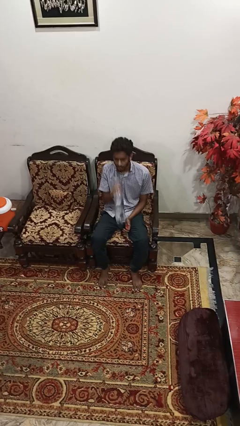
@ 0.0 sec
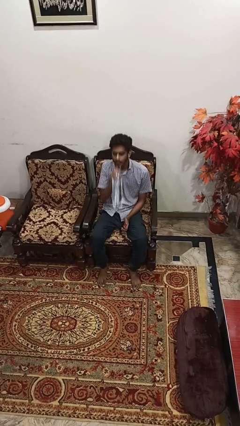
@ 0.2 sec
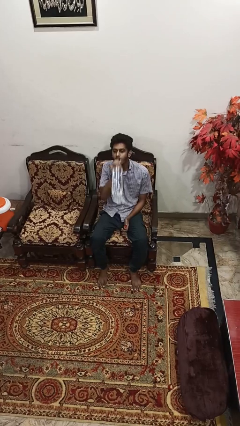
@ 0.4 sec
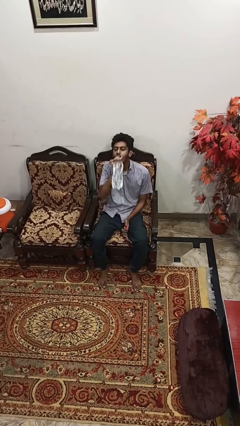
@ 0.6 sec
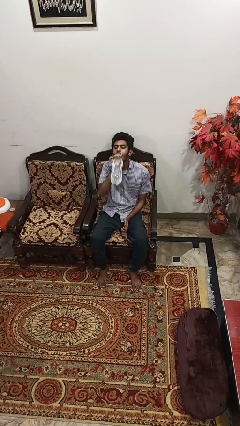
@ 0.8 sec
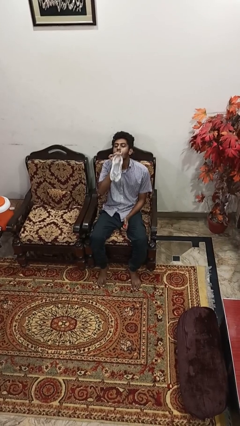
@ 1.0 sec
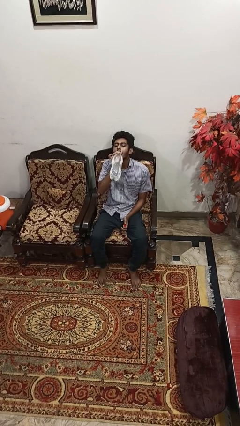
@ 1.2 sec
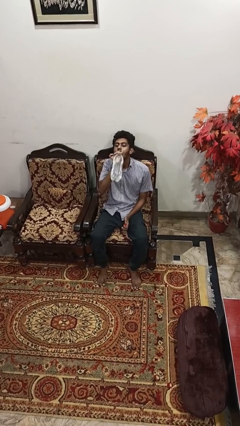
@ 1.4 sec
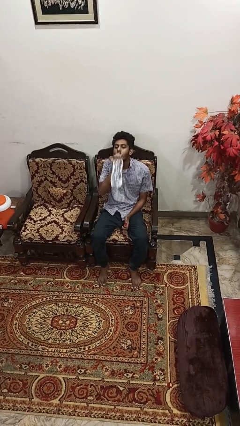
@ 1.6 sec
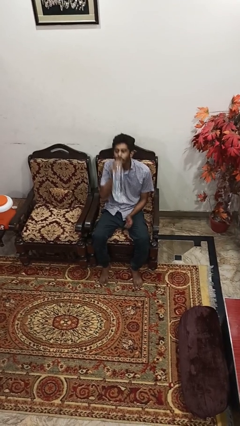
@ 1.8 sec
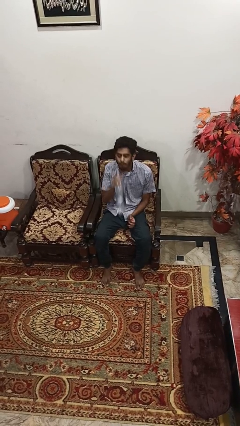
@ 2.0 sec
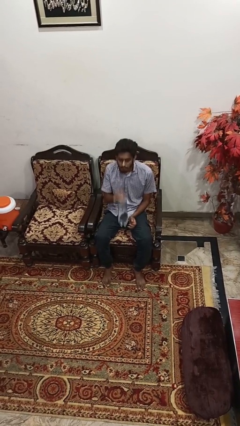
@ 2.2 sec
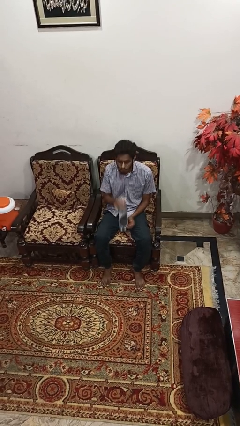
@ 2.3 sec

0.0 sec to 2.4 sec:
person drinks from bottle

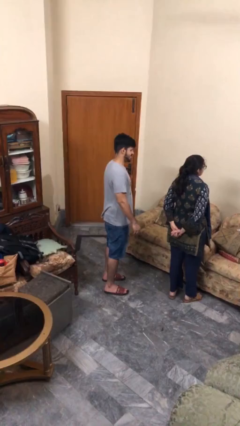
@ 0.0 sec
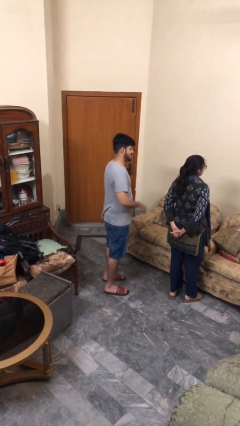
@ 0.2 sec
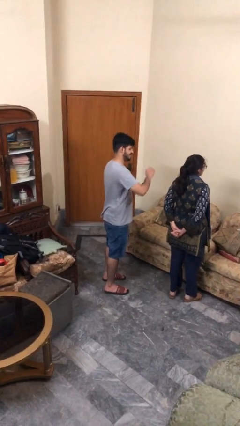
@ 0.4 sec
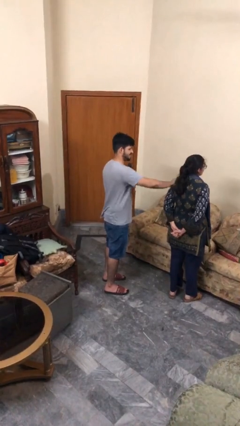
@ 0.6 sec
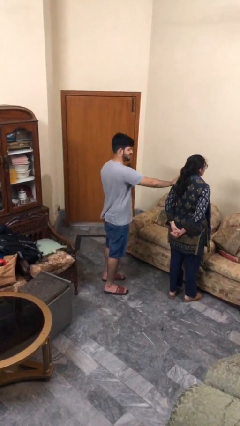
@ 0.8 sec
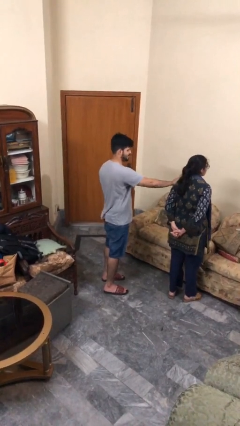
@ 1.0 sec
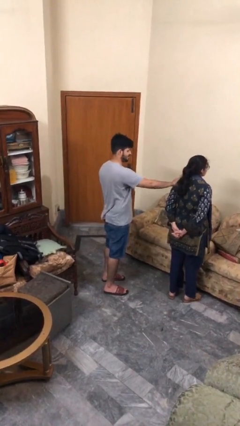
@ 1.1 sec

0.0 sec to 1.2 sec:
person grabs person by shoulder

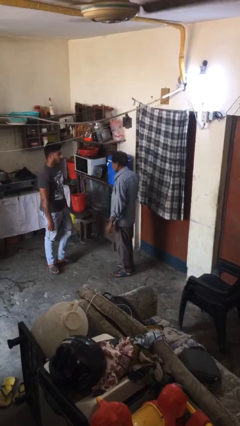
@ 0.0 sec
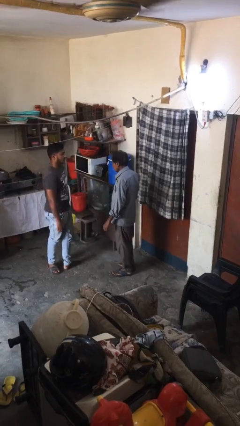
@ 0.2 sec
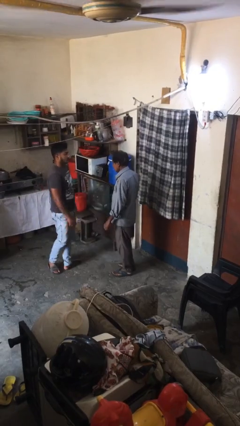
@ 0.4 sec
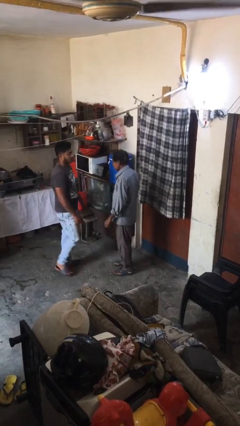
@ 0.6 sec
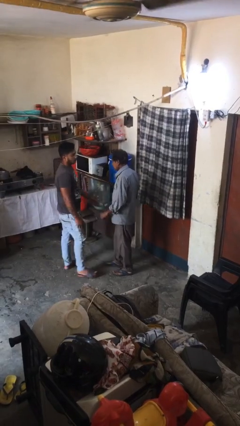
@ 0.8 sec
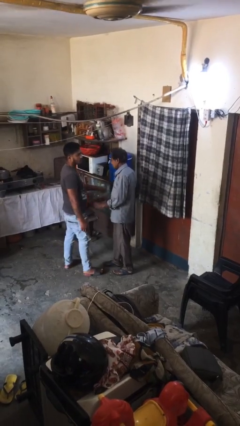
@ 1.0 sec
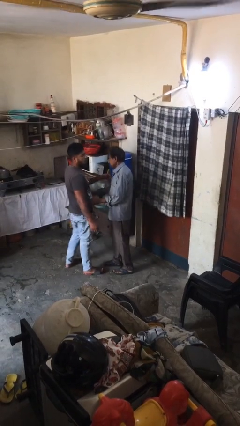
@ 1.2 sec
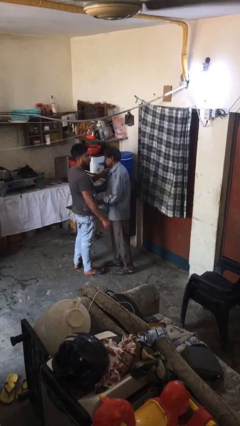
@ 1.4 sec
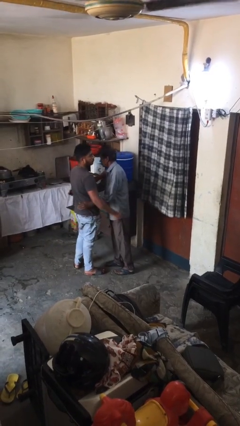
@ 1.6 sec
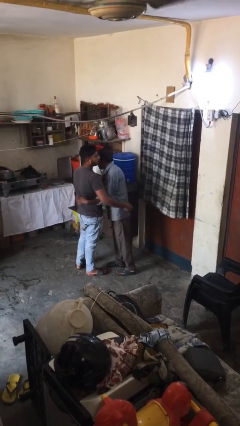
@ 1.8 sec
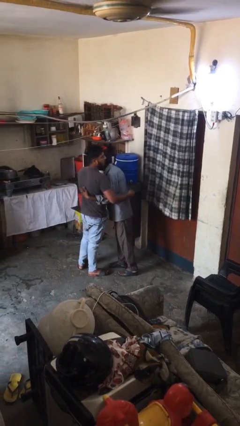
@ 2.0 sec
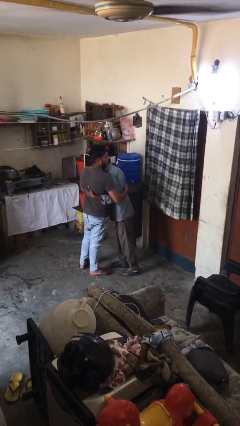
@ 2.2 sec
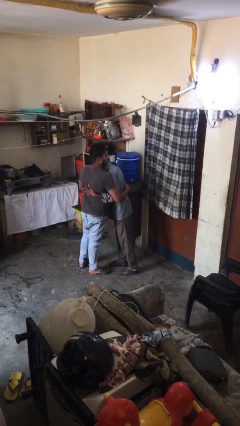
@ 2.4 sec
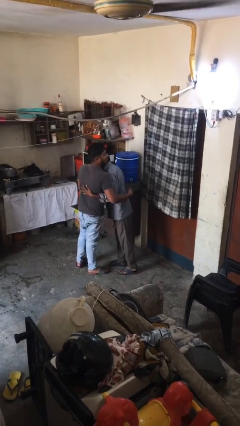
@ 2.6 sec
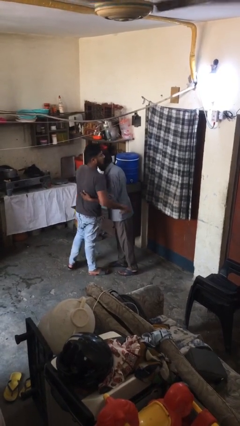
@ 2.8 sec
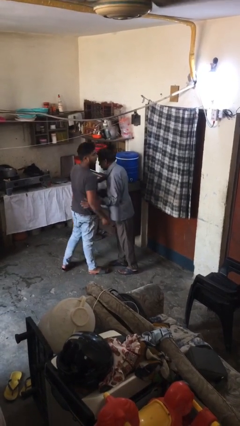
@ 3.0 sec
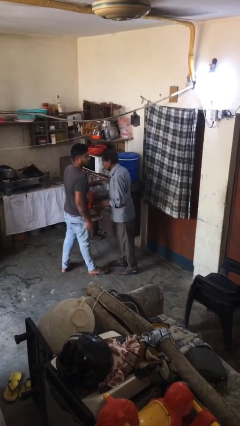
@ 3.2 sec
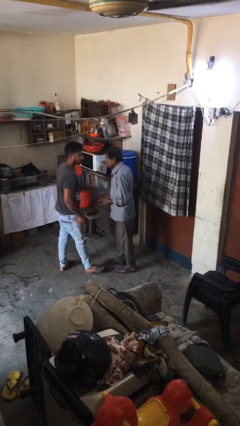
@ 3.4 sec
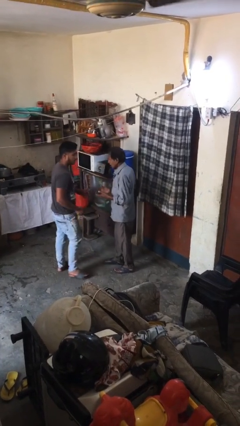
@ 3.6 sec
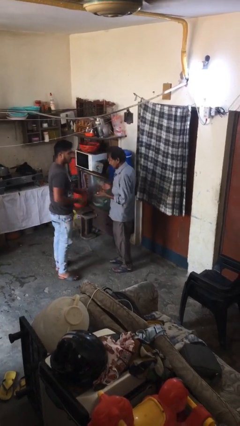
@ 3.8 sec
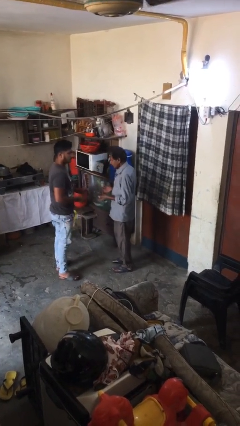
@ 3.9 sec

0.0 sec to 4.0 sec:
person embraces person

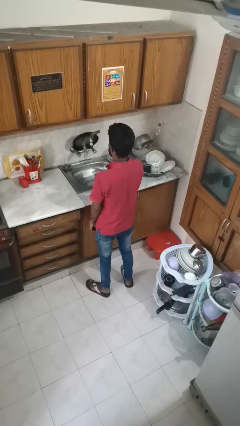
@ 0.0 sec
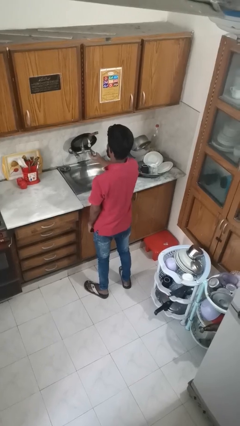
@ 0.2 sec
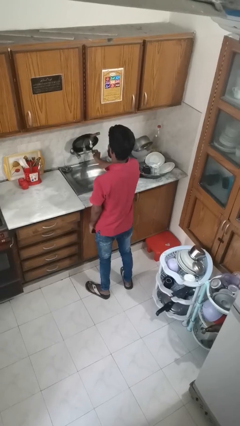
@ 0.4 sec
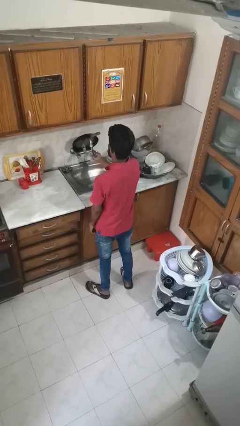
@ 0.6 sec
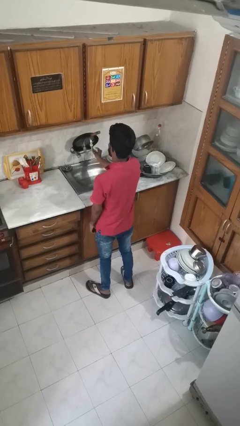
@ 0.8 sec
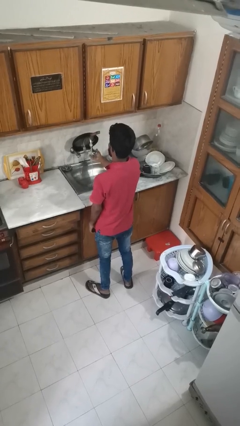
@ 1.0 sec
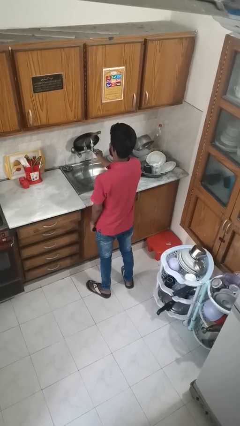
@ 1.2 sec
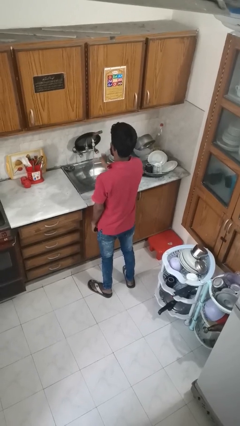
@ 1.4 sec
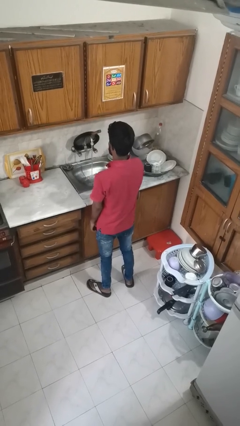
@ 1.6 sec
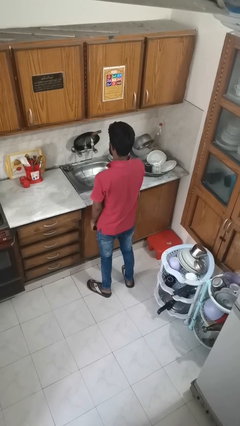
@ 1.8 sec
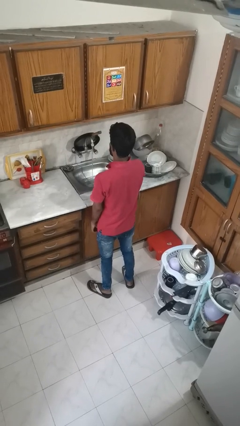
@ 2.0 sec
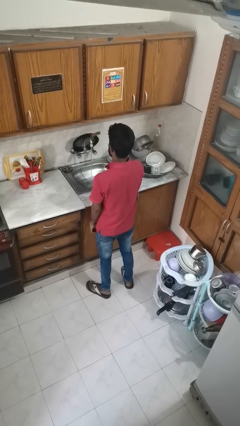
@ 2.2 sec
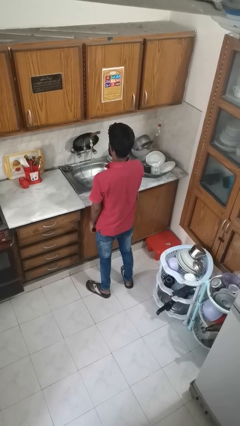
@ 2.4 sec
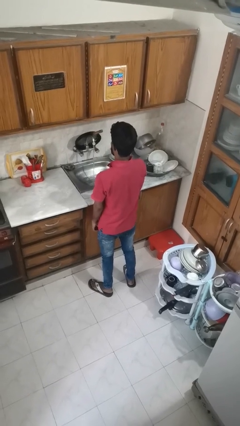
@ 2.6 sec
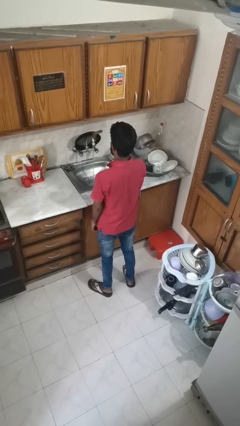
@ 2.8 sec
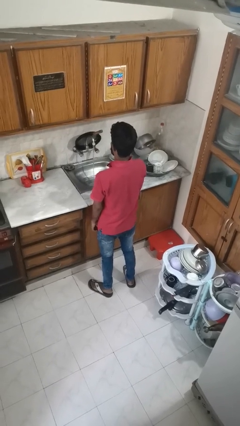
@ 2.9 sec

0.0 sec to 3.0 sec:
person turns on faucet

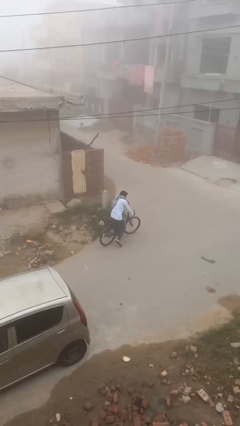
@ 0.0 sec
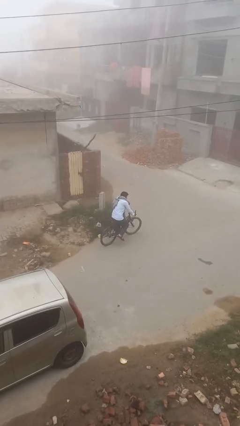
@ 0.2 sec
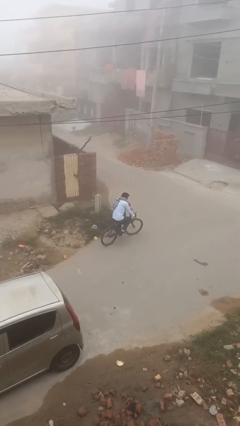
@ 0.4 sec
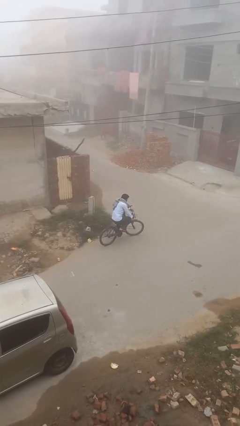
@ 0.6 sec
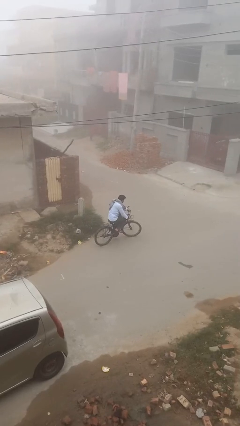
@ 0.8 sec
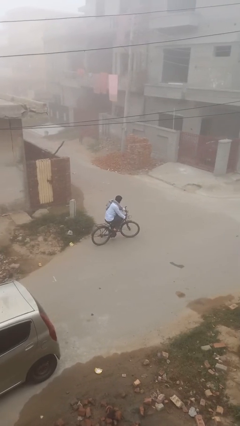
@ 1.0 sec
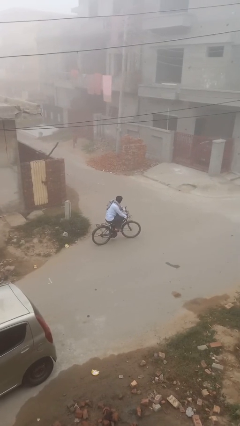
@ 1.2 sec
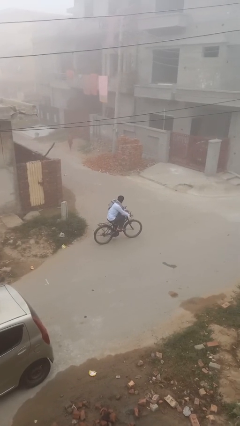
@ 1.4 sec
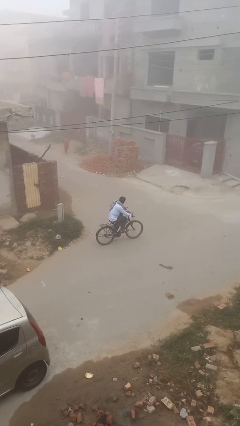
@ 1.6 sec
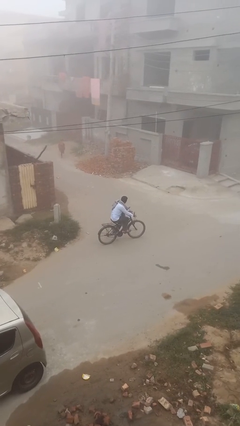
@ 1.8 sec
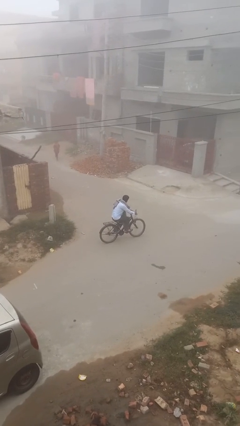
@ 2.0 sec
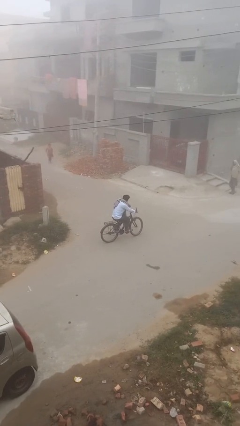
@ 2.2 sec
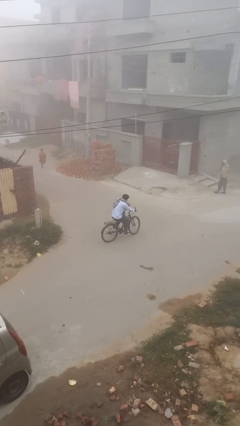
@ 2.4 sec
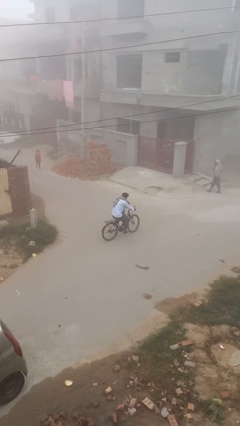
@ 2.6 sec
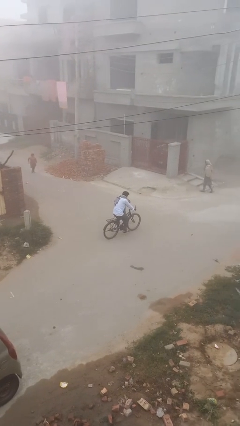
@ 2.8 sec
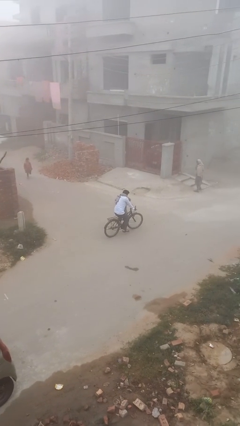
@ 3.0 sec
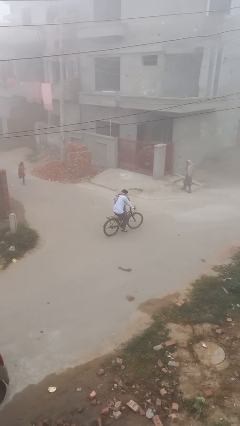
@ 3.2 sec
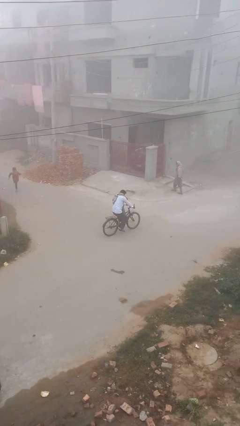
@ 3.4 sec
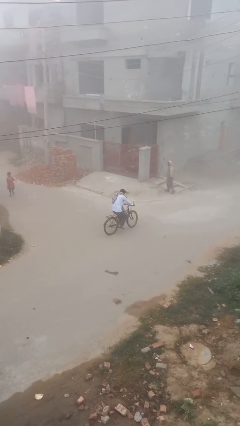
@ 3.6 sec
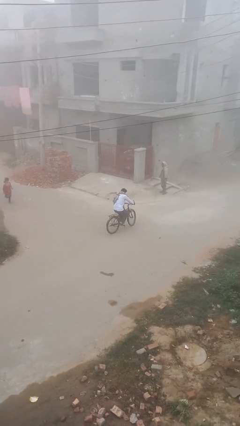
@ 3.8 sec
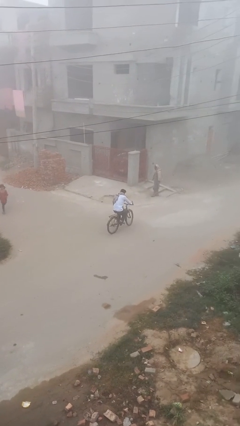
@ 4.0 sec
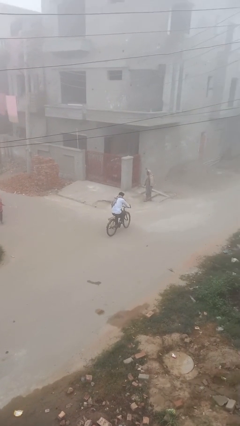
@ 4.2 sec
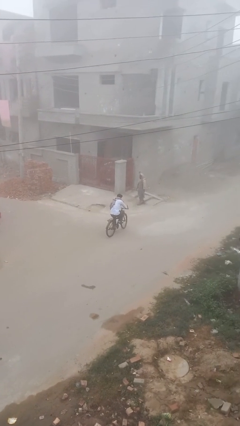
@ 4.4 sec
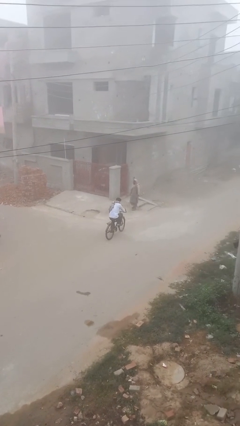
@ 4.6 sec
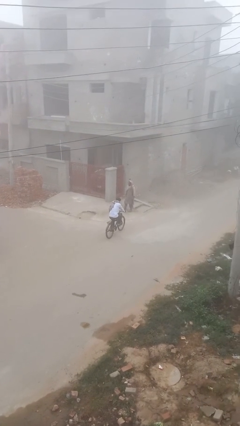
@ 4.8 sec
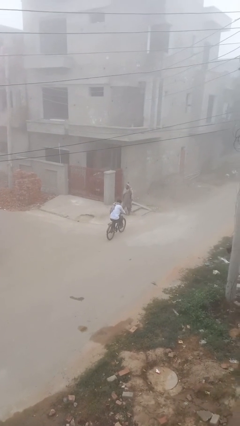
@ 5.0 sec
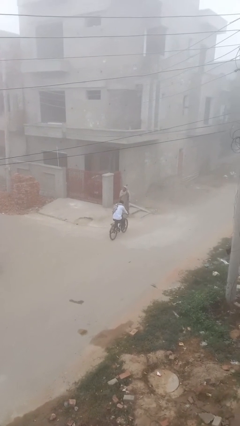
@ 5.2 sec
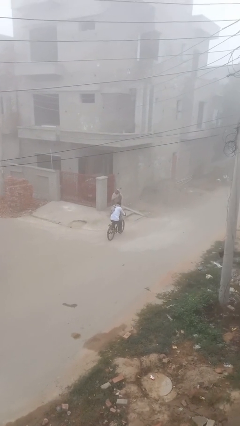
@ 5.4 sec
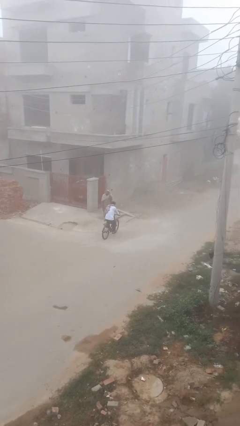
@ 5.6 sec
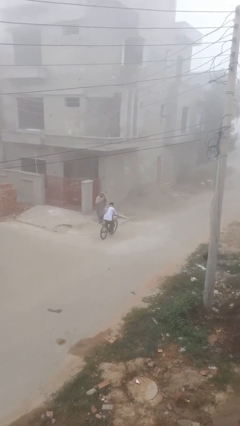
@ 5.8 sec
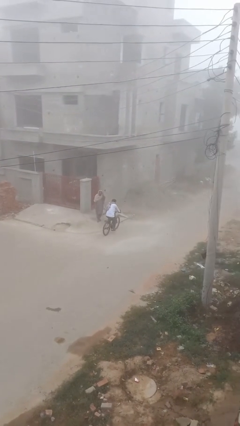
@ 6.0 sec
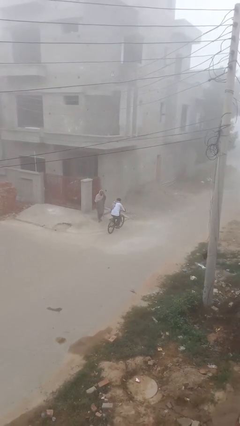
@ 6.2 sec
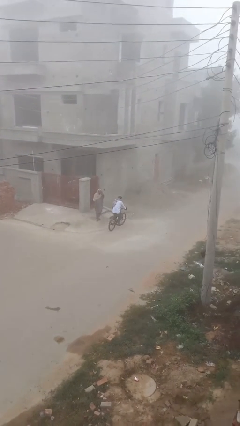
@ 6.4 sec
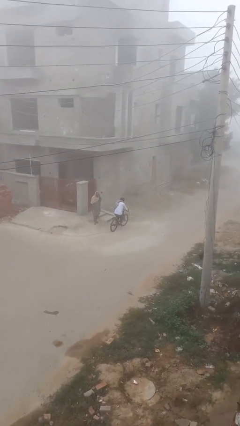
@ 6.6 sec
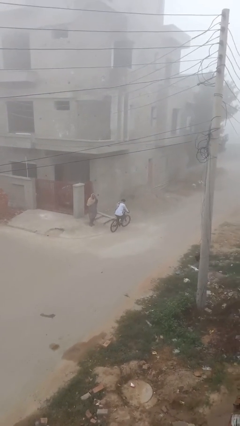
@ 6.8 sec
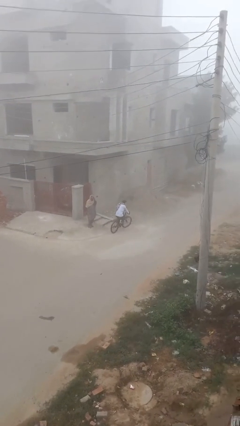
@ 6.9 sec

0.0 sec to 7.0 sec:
person rides bicycle
